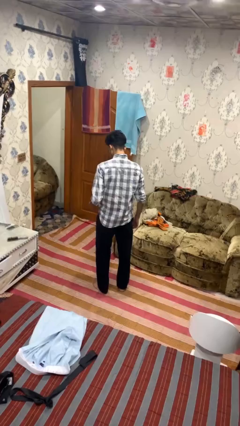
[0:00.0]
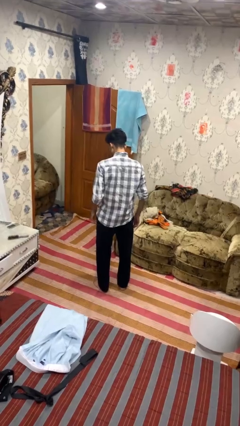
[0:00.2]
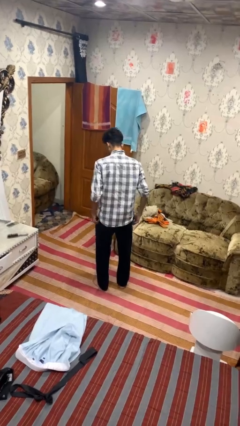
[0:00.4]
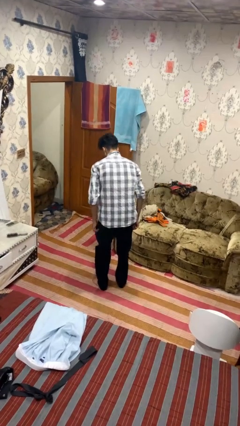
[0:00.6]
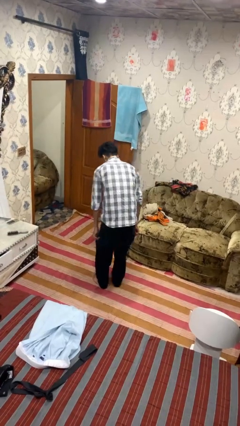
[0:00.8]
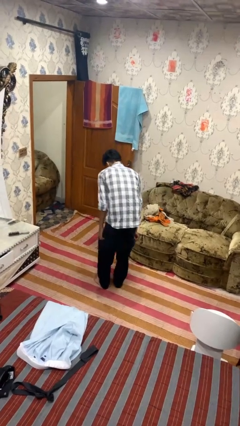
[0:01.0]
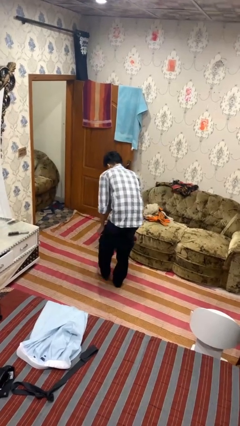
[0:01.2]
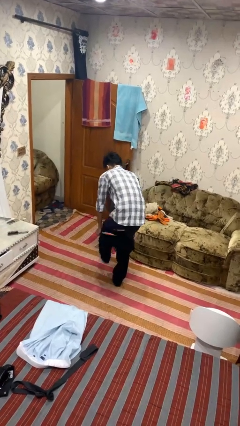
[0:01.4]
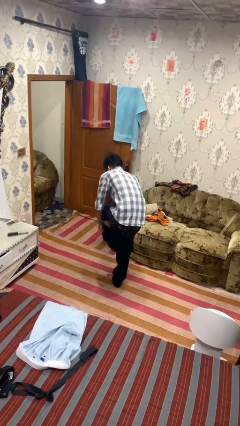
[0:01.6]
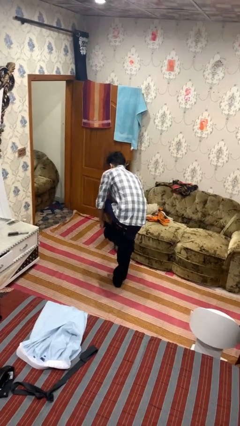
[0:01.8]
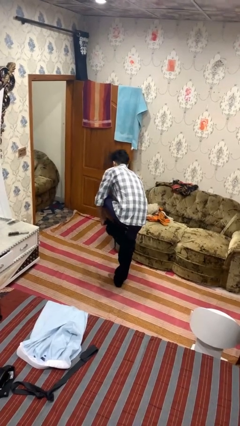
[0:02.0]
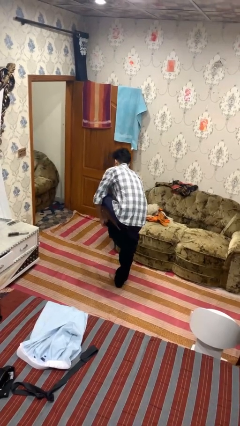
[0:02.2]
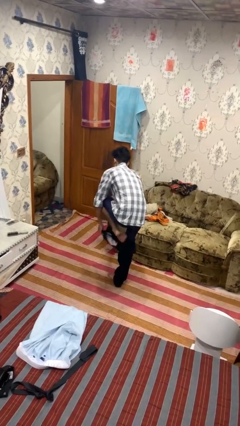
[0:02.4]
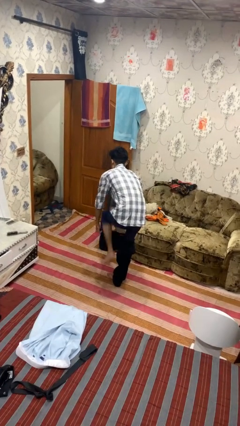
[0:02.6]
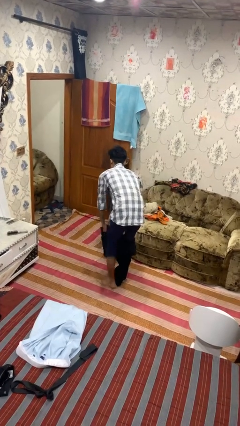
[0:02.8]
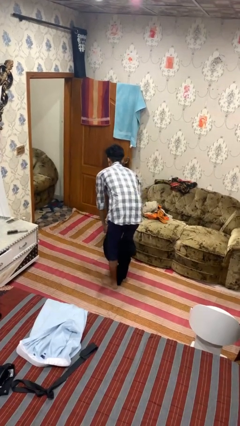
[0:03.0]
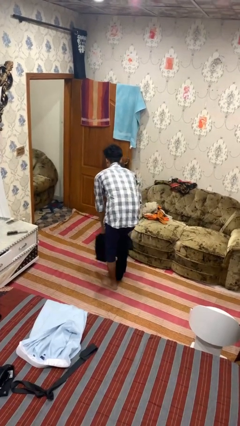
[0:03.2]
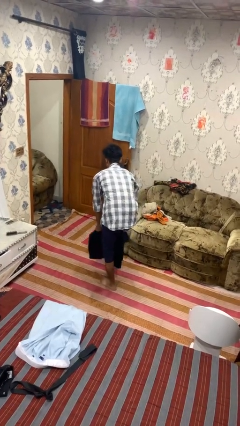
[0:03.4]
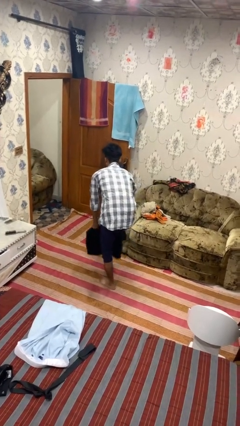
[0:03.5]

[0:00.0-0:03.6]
person takes off pants

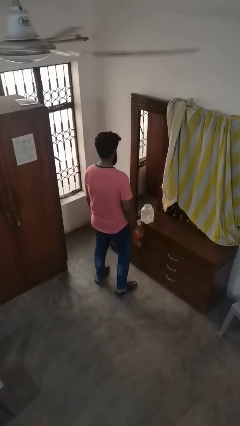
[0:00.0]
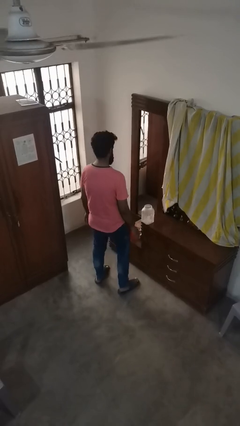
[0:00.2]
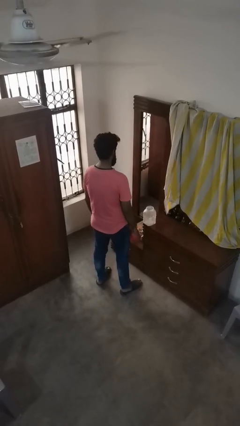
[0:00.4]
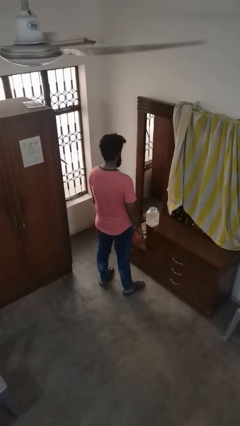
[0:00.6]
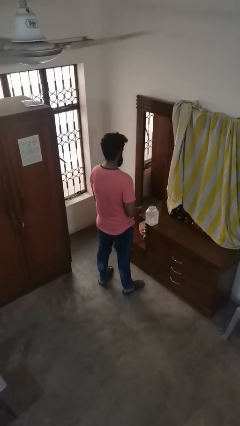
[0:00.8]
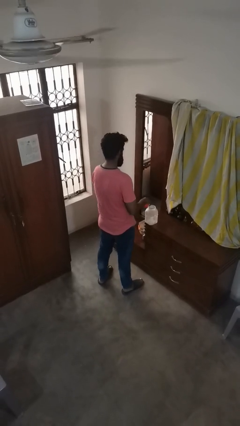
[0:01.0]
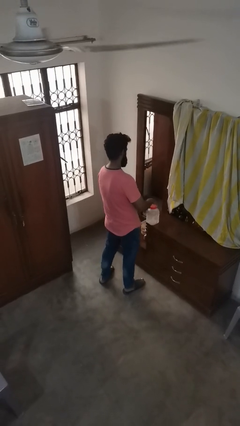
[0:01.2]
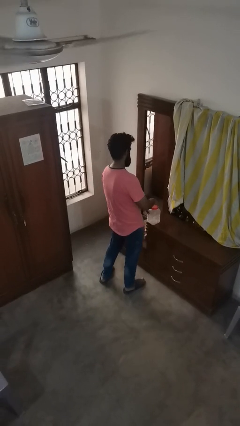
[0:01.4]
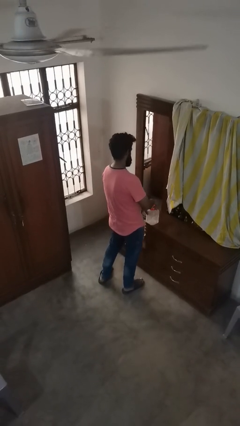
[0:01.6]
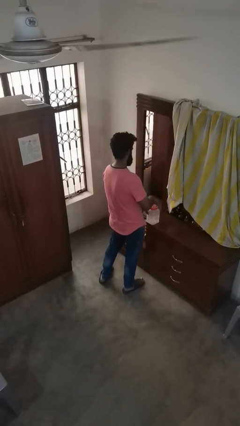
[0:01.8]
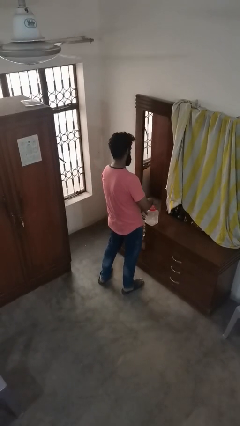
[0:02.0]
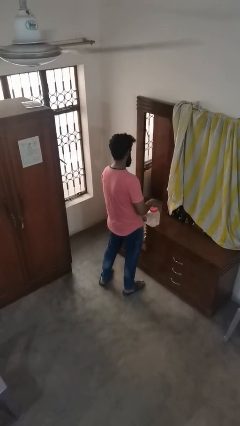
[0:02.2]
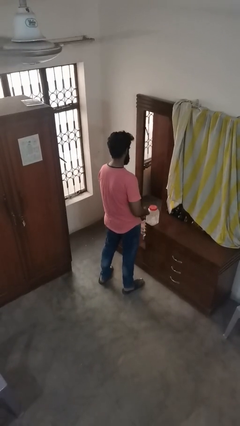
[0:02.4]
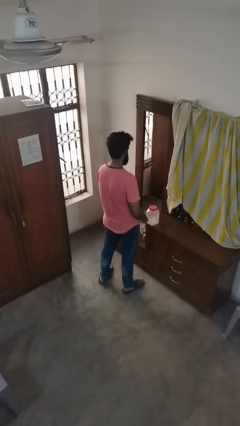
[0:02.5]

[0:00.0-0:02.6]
person closes jar

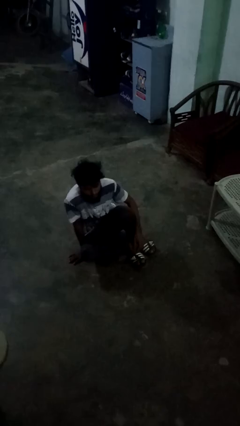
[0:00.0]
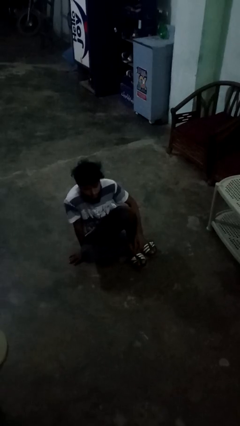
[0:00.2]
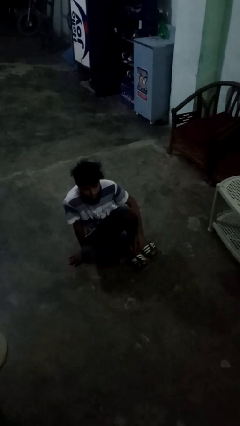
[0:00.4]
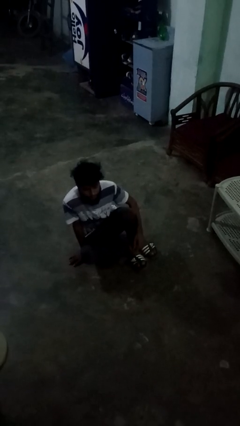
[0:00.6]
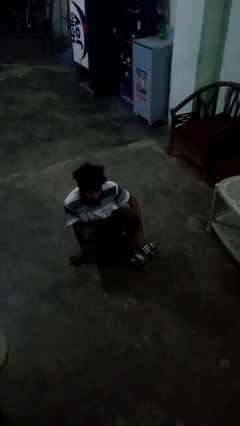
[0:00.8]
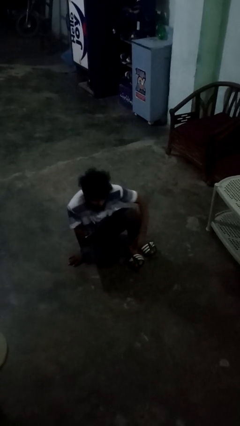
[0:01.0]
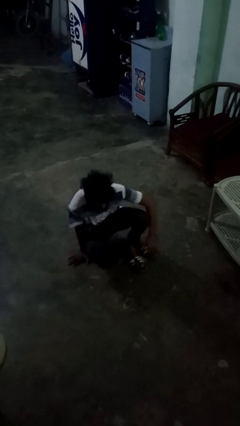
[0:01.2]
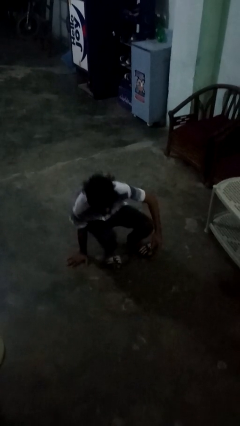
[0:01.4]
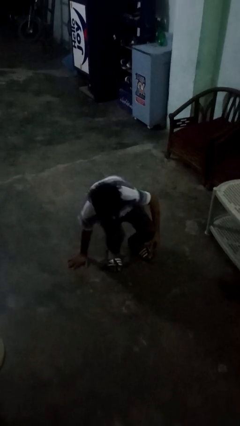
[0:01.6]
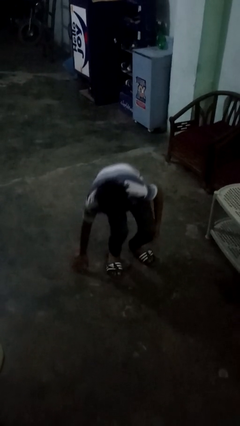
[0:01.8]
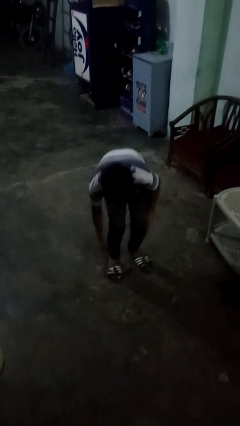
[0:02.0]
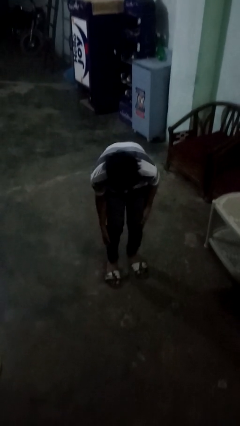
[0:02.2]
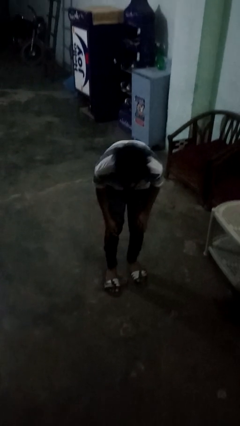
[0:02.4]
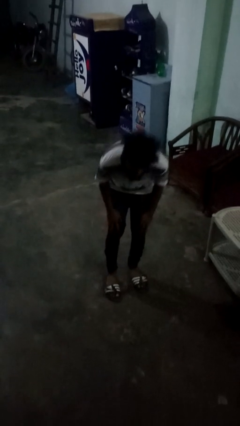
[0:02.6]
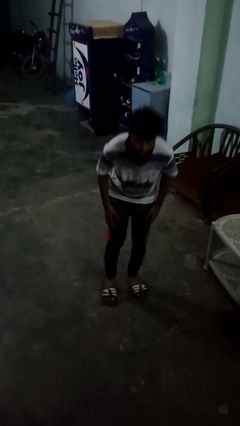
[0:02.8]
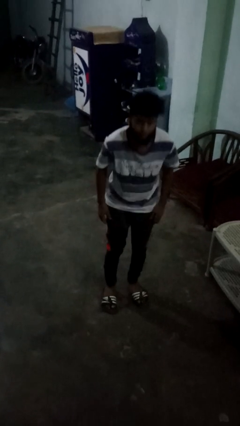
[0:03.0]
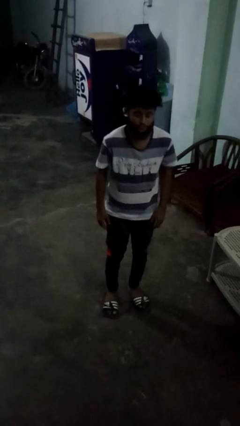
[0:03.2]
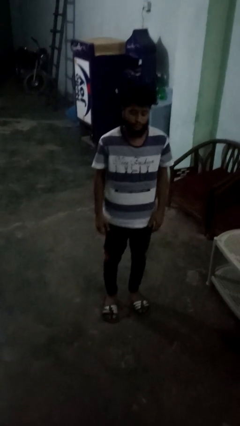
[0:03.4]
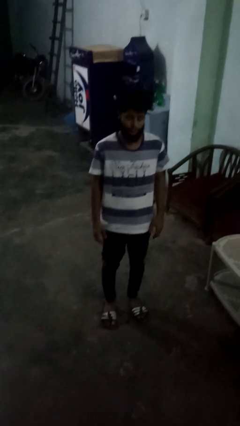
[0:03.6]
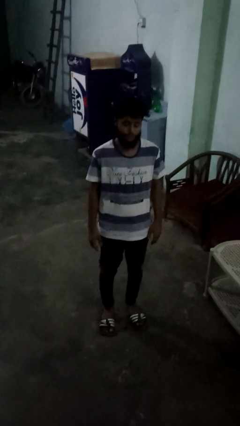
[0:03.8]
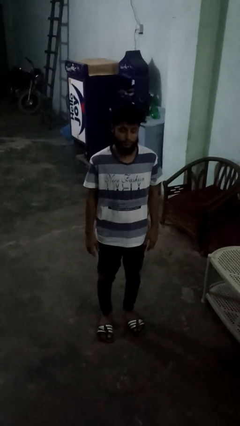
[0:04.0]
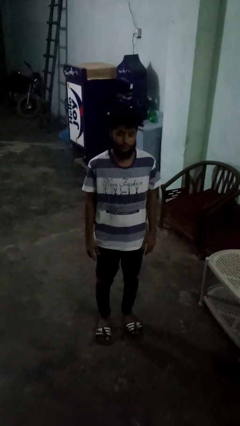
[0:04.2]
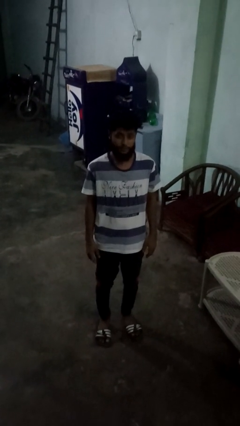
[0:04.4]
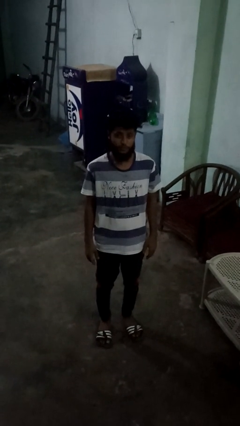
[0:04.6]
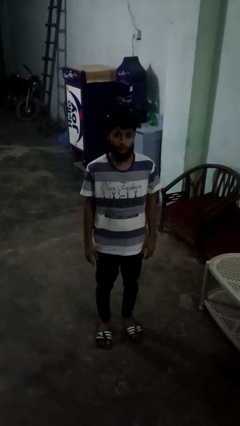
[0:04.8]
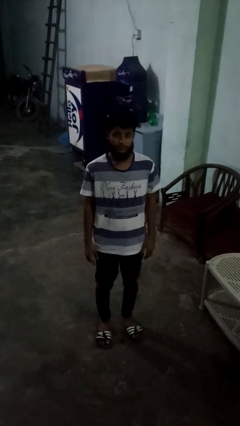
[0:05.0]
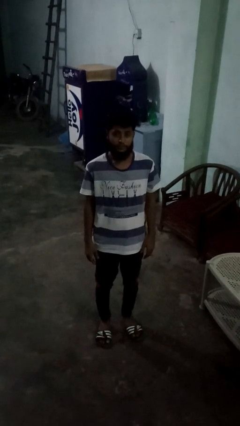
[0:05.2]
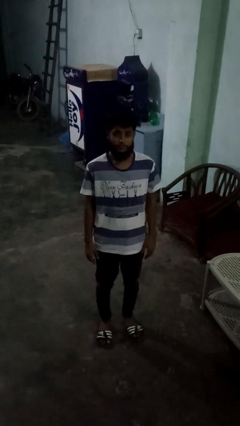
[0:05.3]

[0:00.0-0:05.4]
person stands up from floor

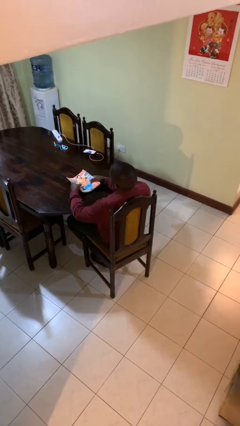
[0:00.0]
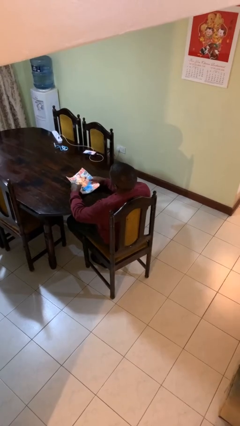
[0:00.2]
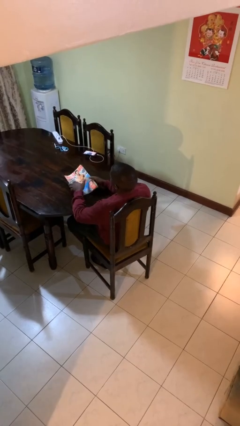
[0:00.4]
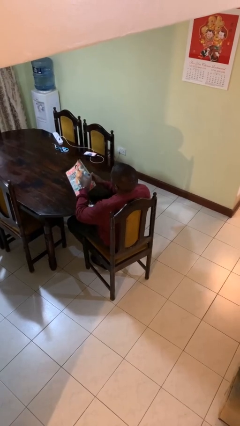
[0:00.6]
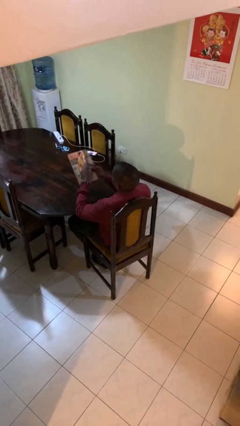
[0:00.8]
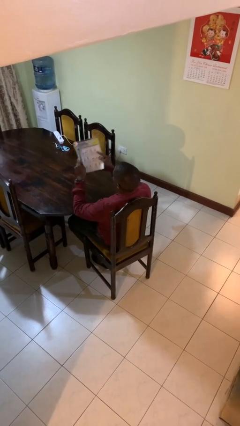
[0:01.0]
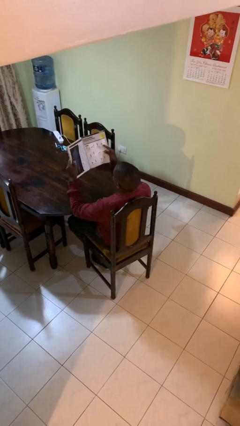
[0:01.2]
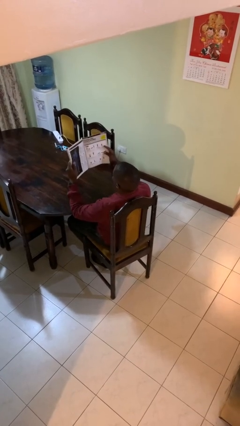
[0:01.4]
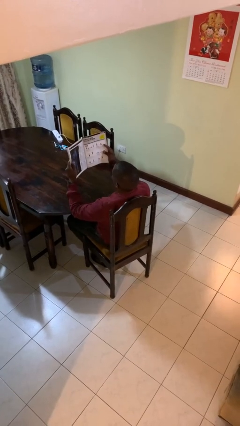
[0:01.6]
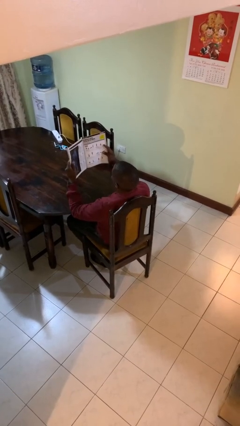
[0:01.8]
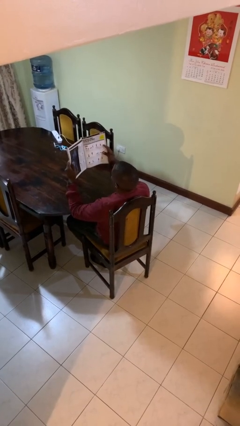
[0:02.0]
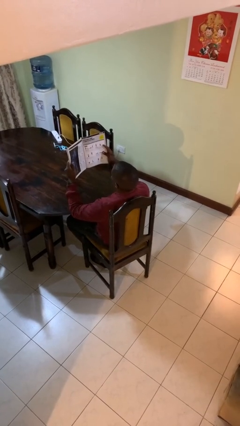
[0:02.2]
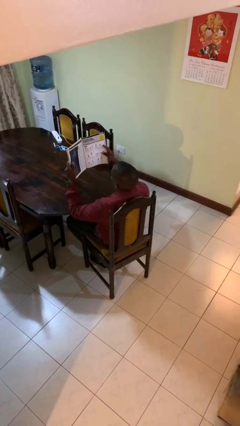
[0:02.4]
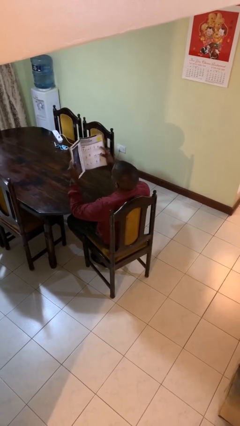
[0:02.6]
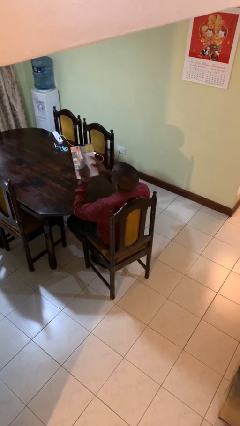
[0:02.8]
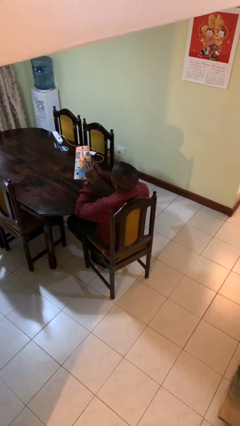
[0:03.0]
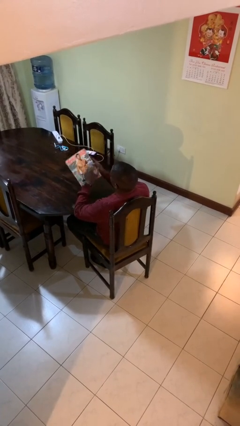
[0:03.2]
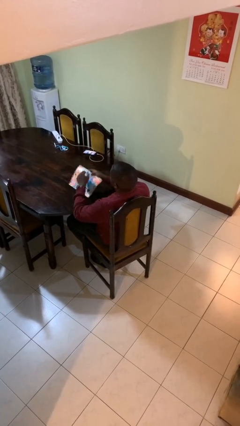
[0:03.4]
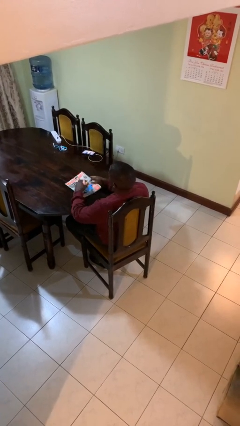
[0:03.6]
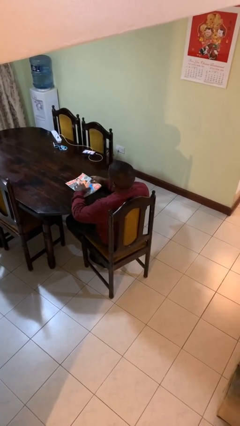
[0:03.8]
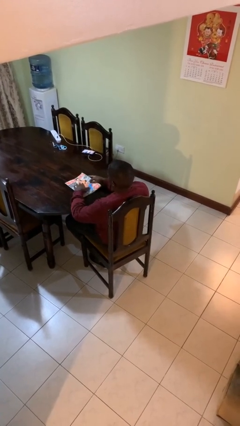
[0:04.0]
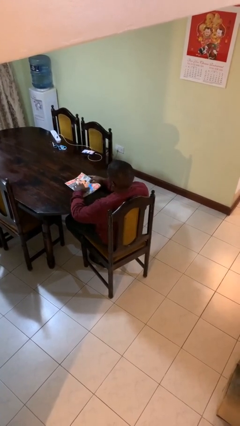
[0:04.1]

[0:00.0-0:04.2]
person reads magazine

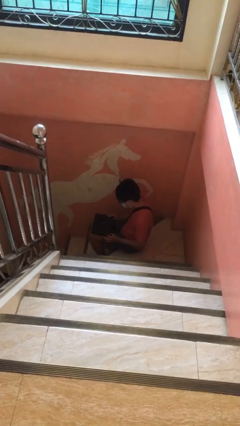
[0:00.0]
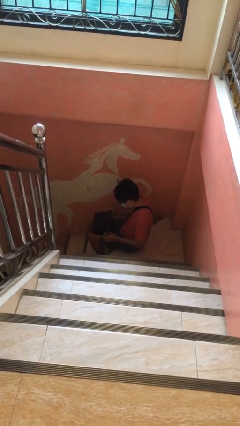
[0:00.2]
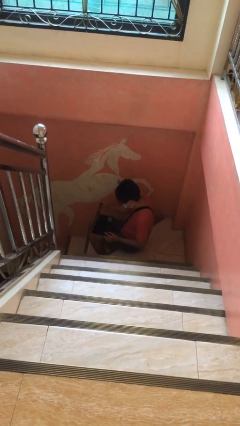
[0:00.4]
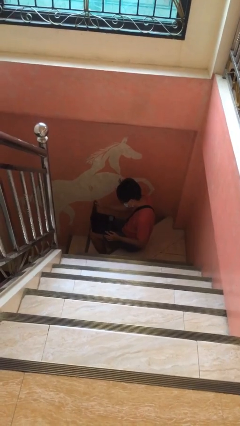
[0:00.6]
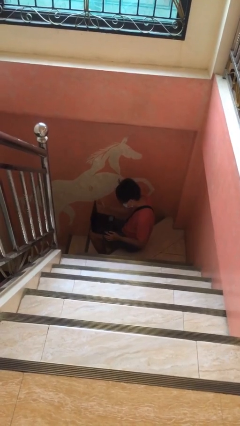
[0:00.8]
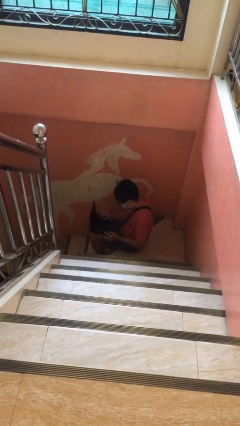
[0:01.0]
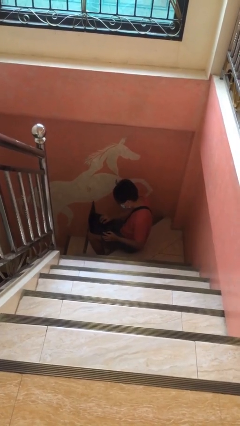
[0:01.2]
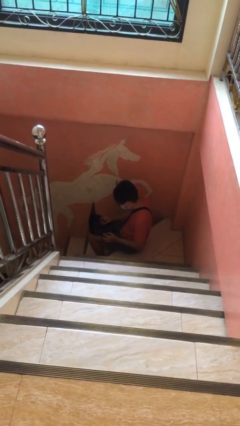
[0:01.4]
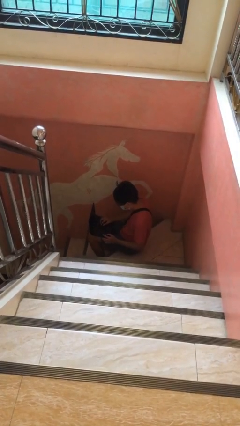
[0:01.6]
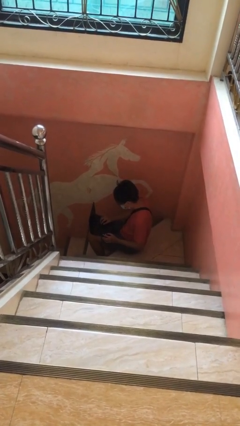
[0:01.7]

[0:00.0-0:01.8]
person interacts with laptop

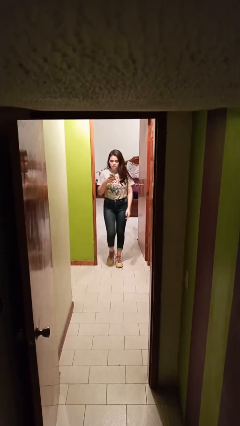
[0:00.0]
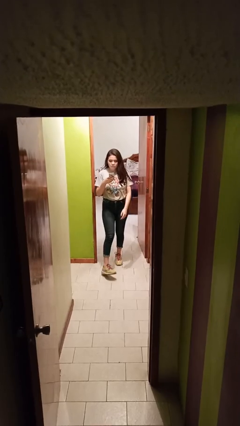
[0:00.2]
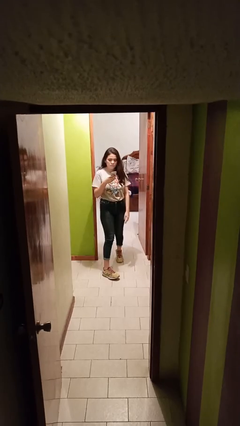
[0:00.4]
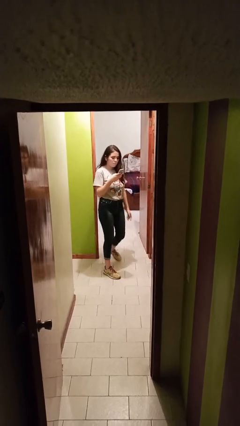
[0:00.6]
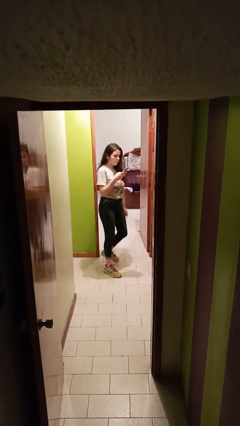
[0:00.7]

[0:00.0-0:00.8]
person enters scene through structure
